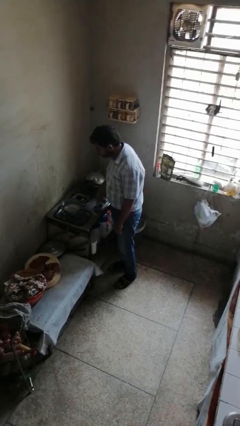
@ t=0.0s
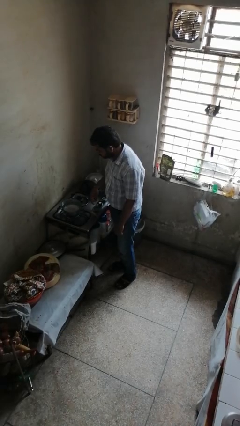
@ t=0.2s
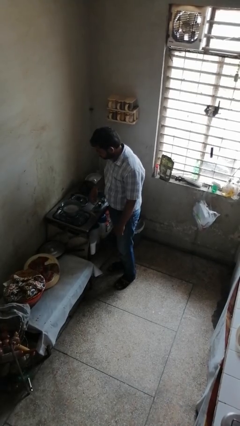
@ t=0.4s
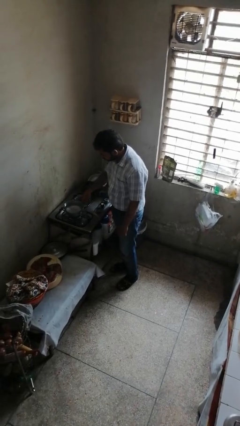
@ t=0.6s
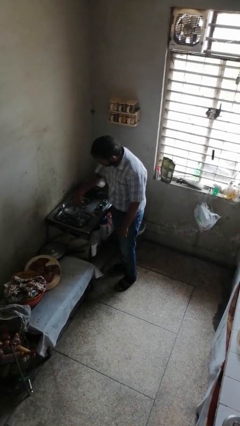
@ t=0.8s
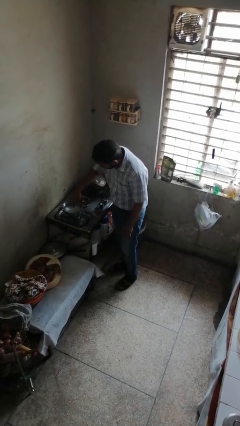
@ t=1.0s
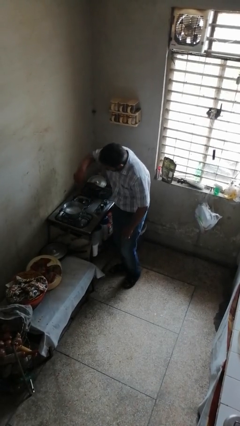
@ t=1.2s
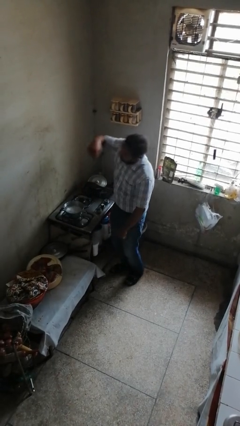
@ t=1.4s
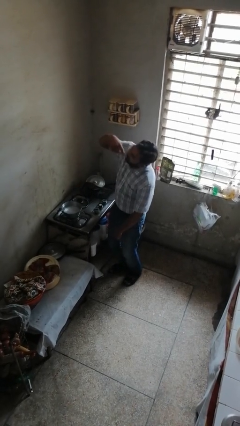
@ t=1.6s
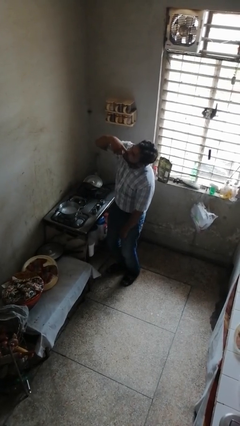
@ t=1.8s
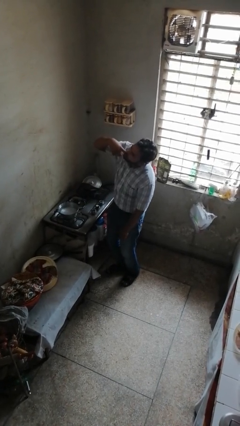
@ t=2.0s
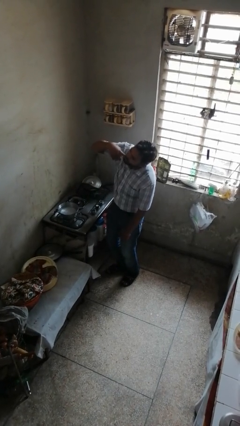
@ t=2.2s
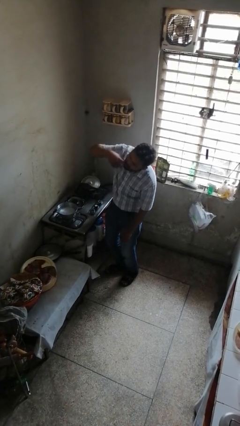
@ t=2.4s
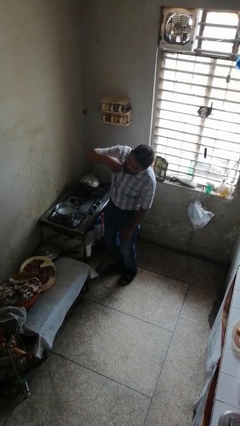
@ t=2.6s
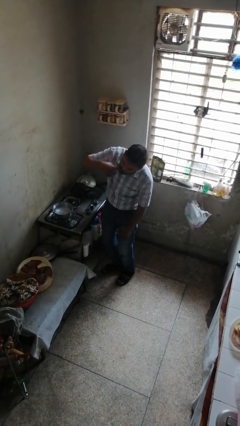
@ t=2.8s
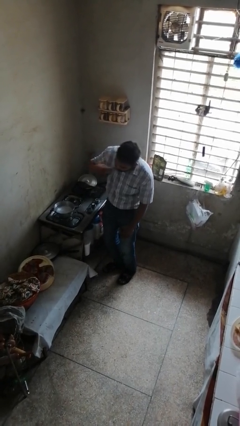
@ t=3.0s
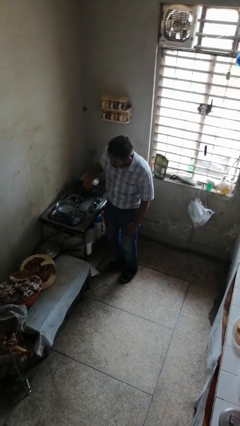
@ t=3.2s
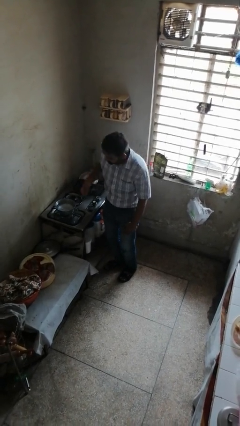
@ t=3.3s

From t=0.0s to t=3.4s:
person burns hand

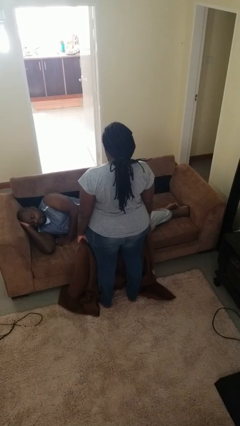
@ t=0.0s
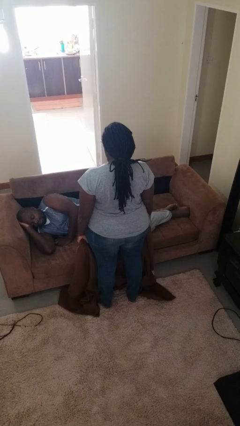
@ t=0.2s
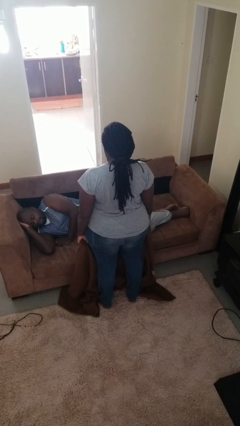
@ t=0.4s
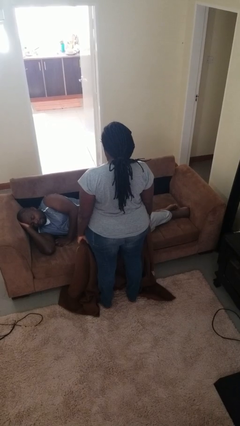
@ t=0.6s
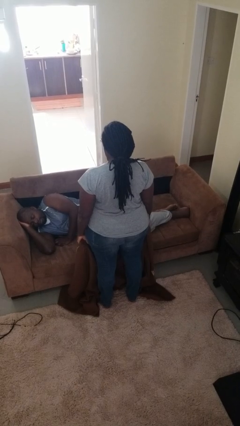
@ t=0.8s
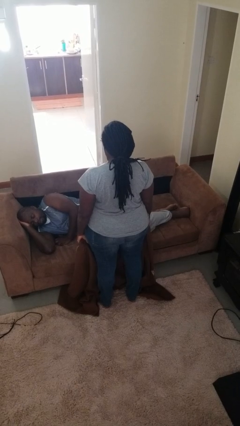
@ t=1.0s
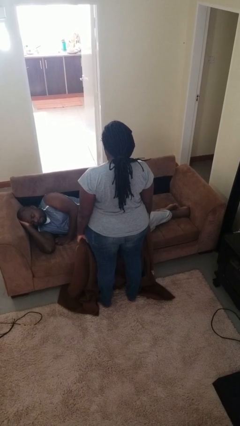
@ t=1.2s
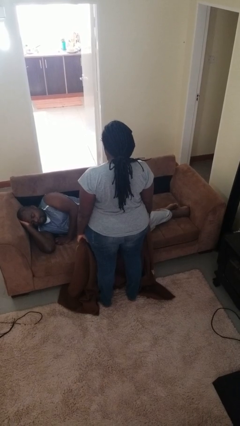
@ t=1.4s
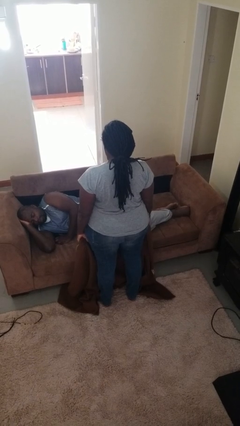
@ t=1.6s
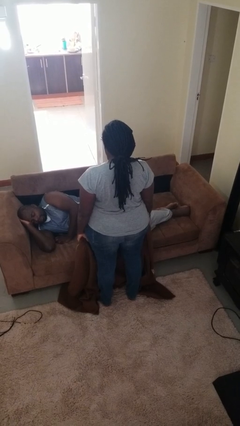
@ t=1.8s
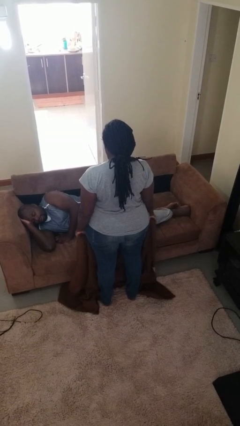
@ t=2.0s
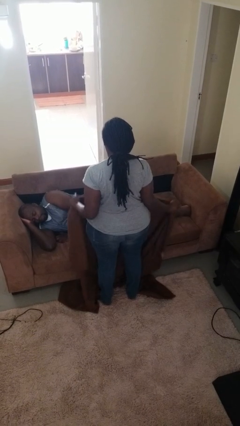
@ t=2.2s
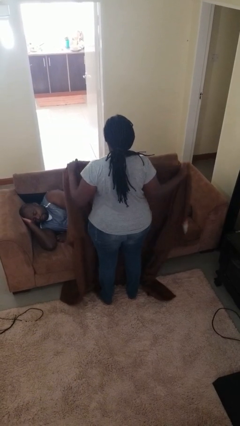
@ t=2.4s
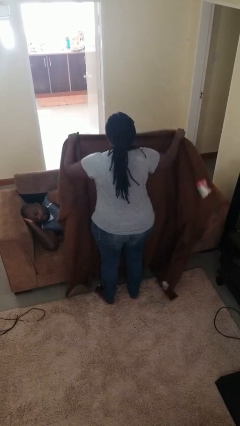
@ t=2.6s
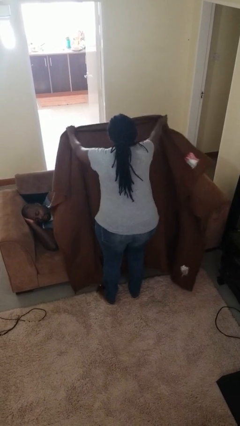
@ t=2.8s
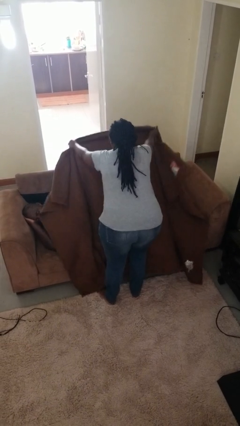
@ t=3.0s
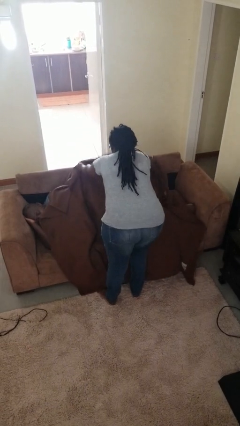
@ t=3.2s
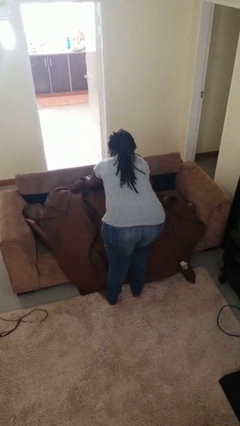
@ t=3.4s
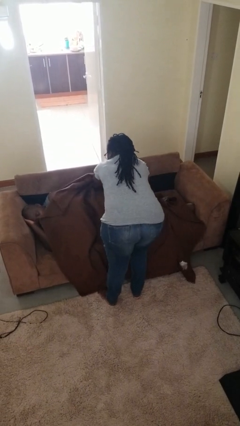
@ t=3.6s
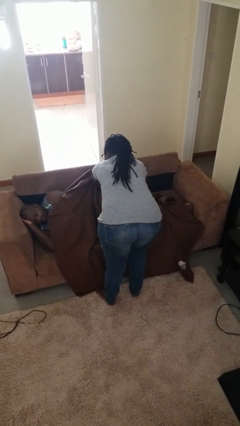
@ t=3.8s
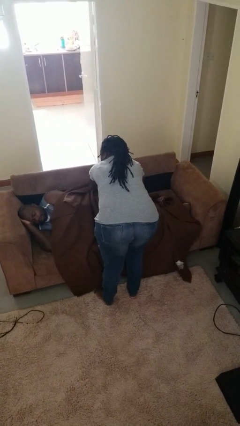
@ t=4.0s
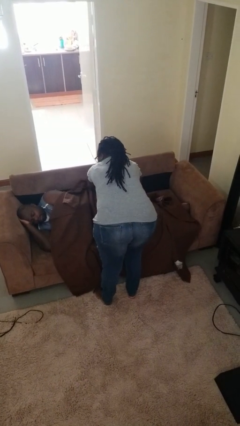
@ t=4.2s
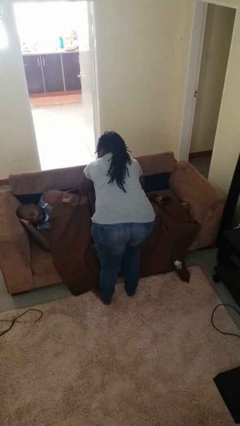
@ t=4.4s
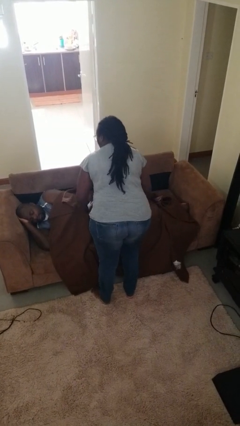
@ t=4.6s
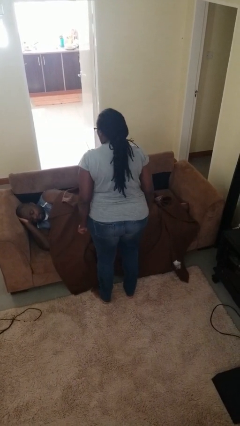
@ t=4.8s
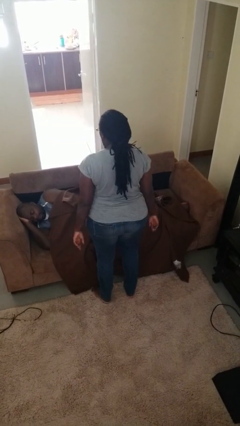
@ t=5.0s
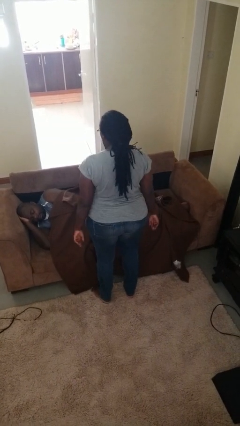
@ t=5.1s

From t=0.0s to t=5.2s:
person covers friend with blanket

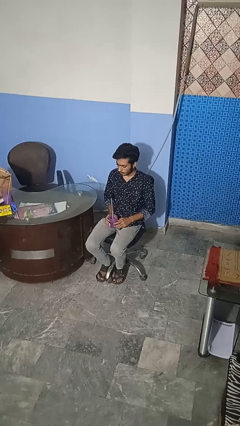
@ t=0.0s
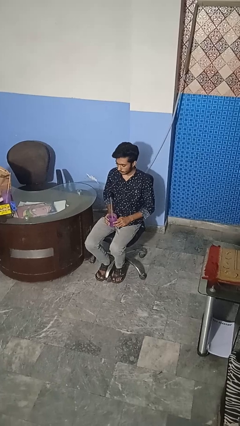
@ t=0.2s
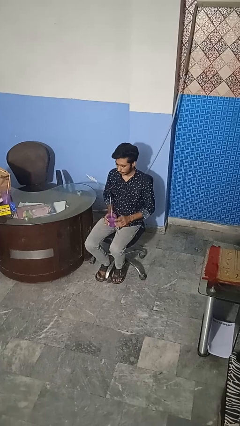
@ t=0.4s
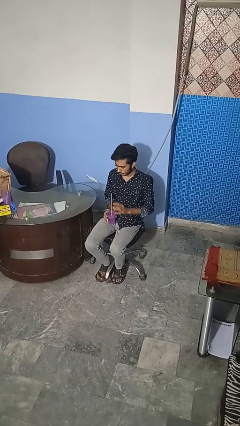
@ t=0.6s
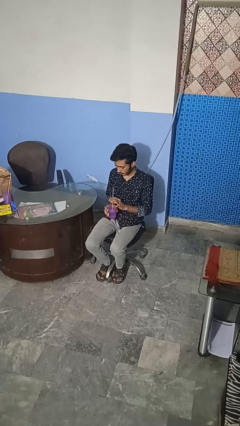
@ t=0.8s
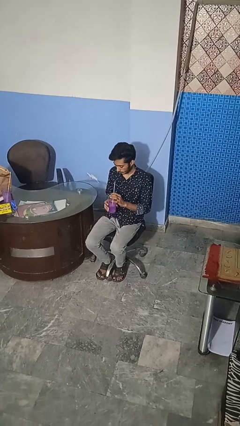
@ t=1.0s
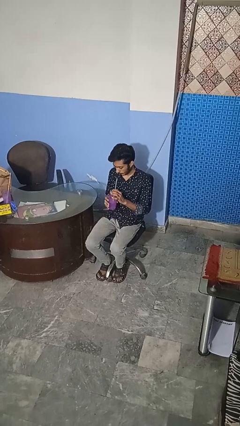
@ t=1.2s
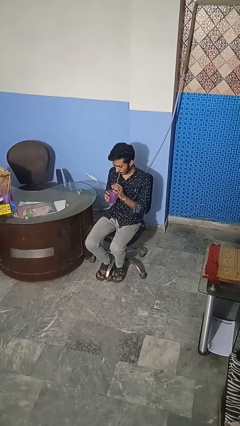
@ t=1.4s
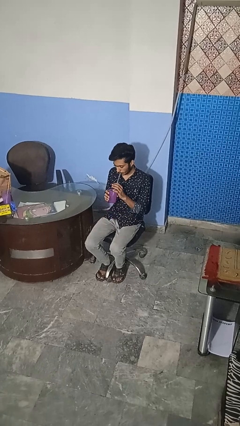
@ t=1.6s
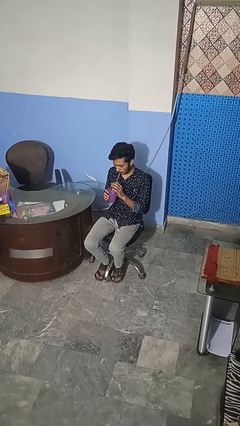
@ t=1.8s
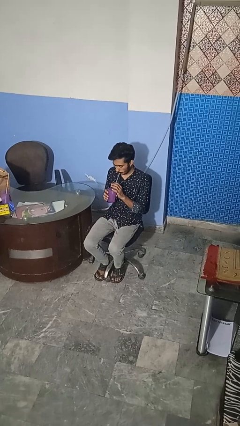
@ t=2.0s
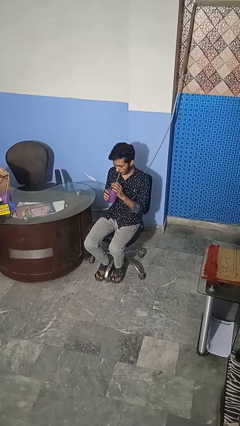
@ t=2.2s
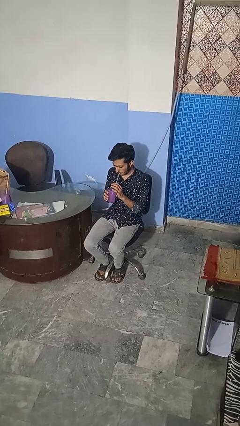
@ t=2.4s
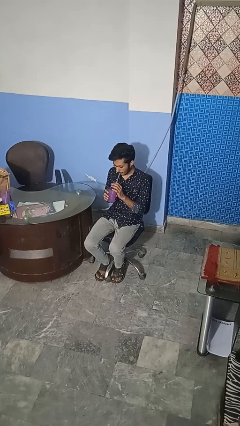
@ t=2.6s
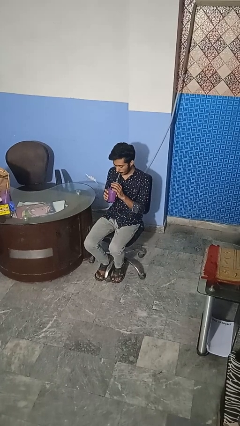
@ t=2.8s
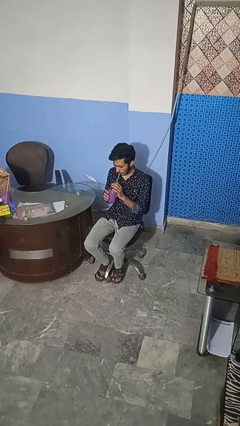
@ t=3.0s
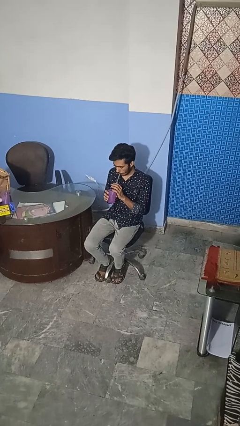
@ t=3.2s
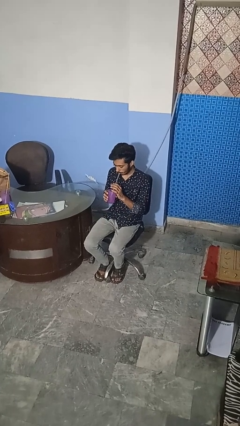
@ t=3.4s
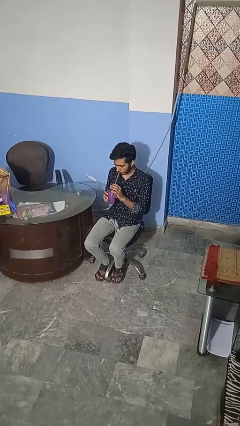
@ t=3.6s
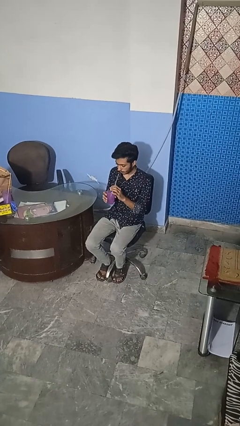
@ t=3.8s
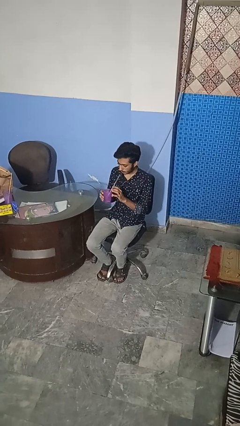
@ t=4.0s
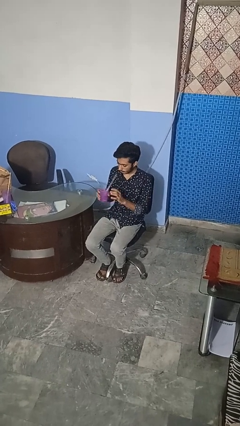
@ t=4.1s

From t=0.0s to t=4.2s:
person drinks from straw

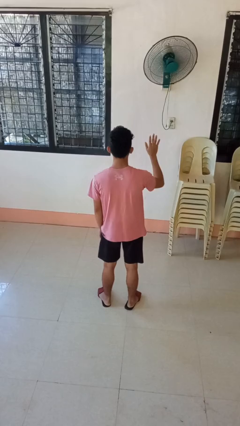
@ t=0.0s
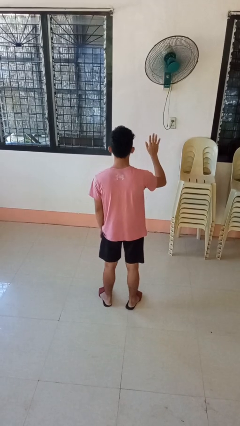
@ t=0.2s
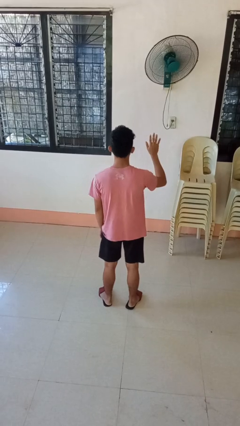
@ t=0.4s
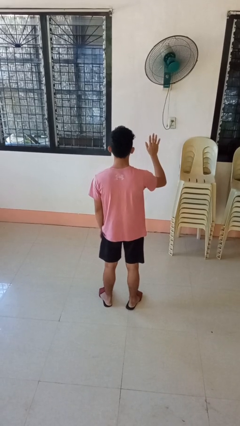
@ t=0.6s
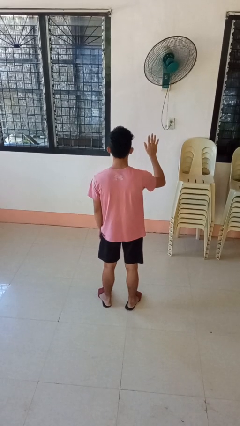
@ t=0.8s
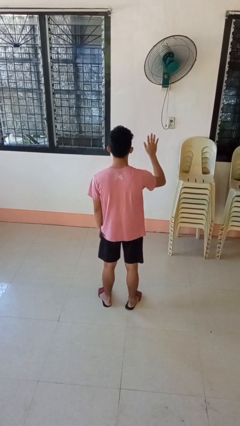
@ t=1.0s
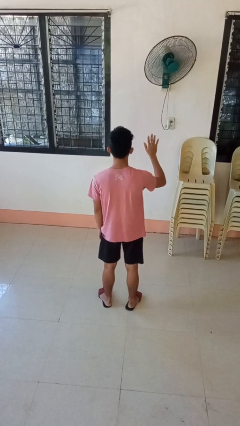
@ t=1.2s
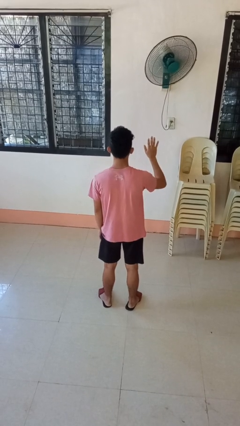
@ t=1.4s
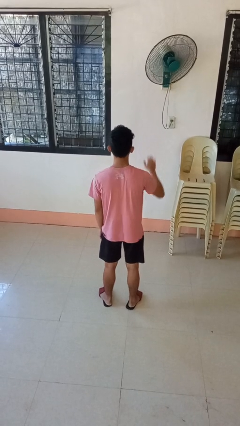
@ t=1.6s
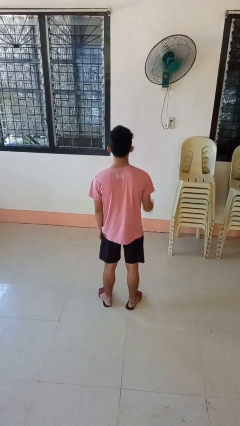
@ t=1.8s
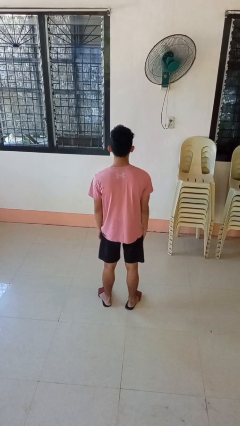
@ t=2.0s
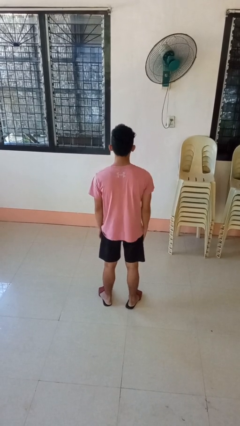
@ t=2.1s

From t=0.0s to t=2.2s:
person gestures number five

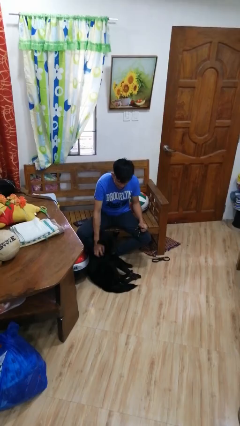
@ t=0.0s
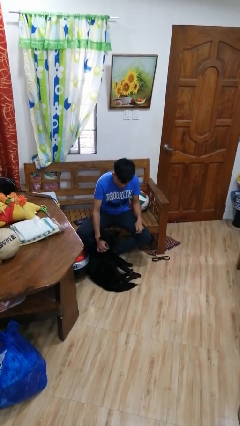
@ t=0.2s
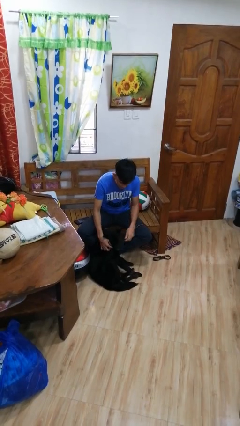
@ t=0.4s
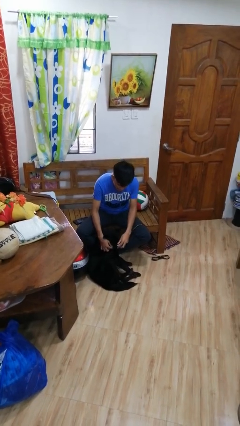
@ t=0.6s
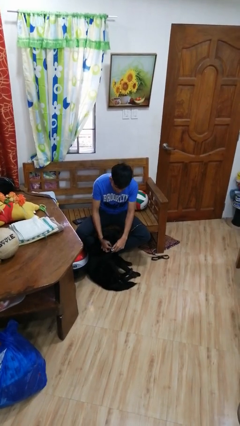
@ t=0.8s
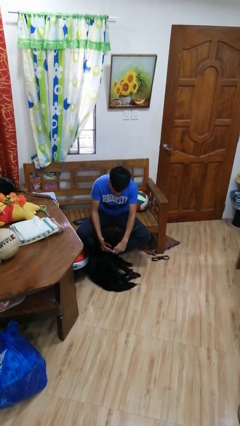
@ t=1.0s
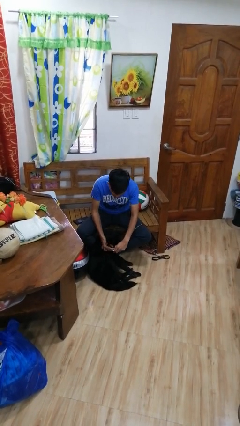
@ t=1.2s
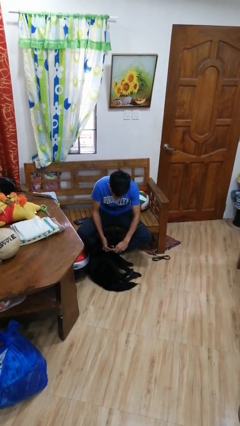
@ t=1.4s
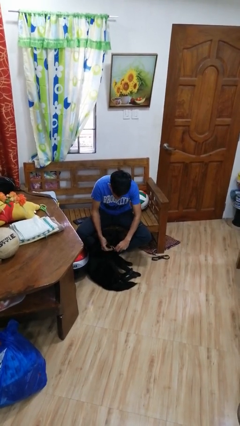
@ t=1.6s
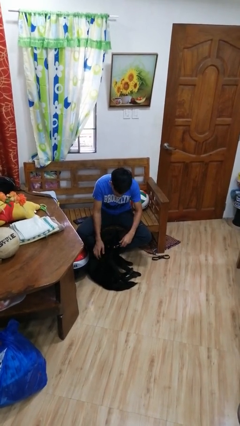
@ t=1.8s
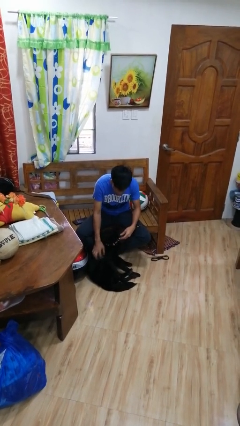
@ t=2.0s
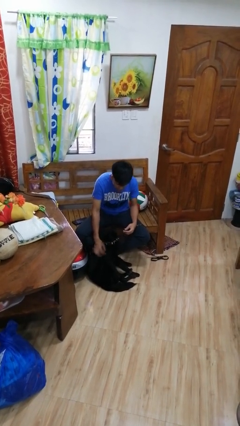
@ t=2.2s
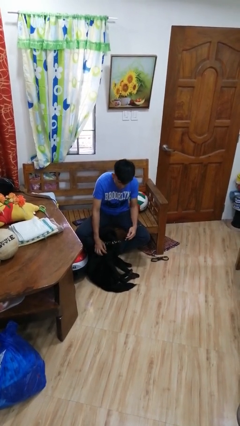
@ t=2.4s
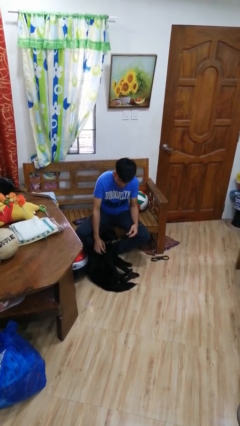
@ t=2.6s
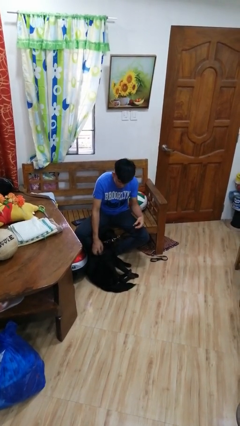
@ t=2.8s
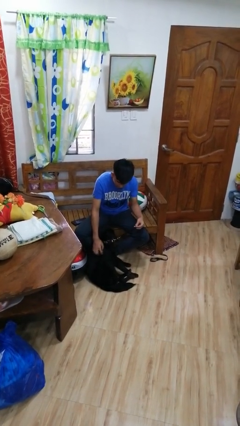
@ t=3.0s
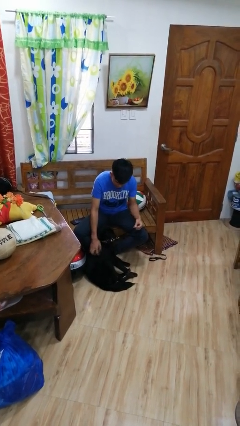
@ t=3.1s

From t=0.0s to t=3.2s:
person attaches leash to dog
